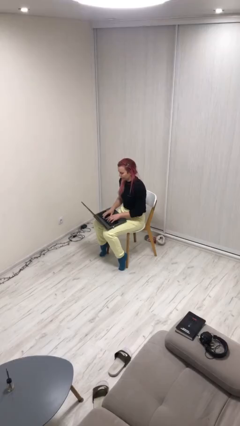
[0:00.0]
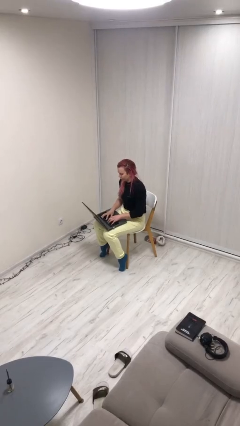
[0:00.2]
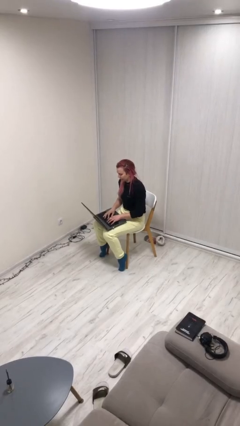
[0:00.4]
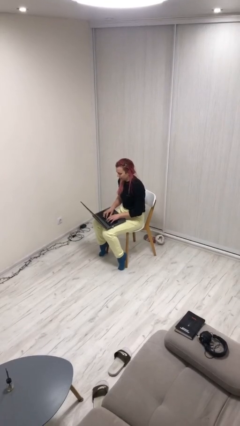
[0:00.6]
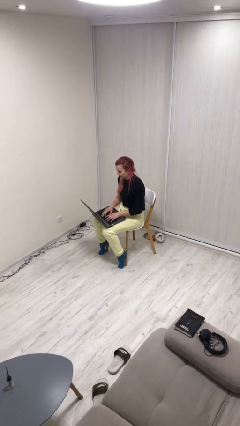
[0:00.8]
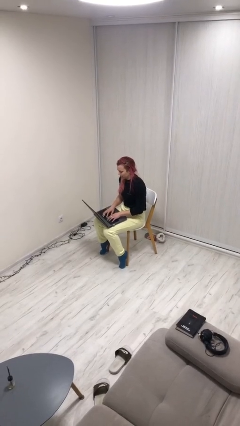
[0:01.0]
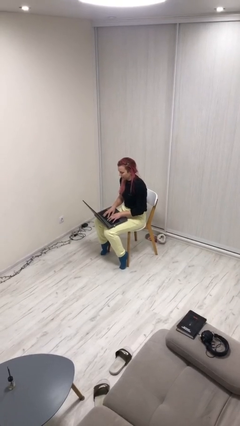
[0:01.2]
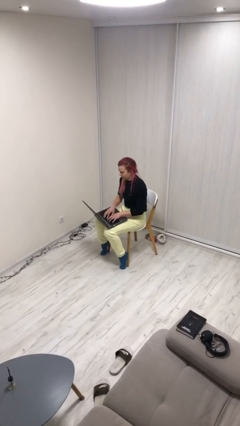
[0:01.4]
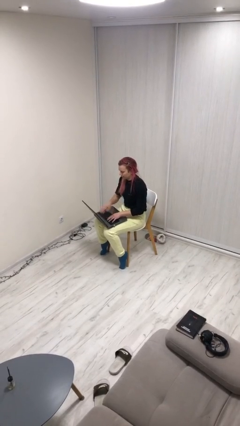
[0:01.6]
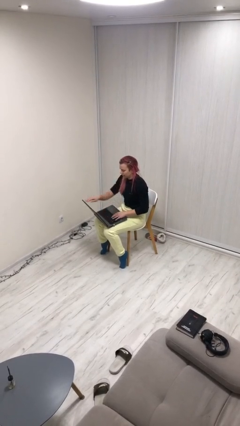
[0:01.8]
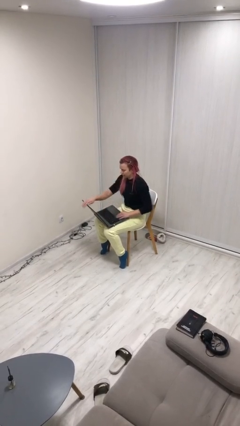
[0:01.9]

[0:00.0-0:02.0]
person interacts with laptop

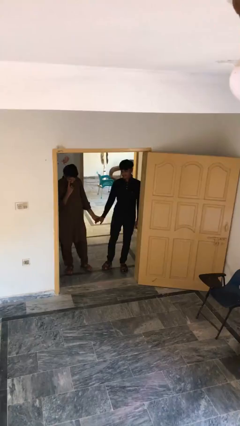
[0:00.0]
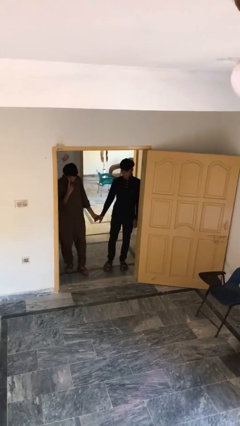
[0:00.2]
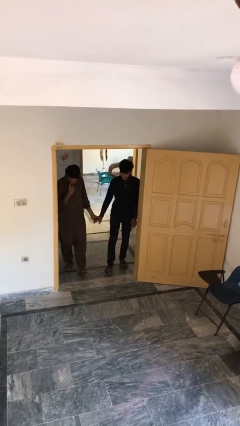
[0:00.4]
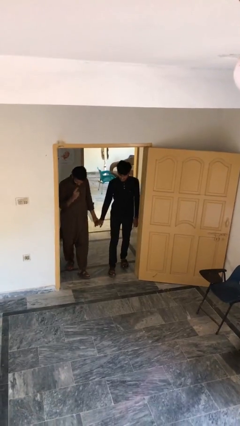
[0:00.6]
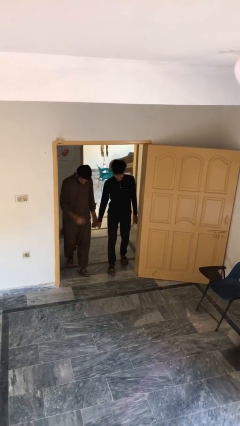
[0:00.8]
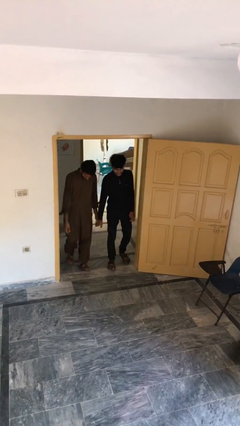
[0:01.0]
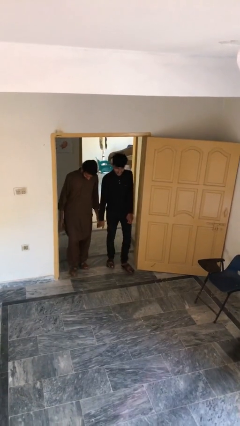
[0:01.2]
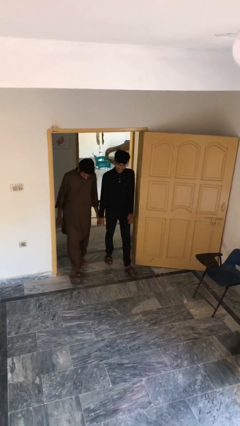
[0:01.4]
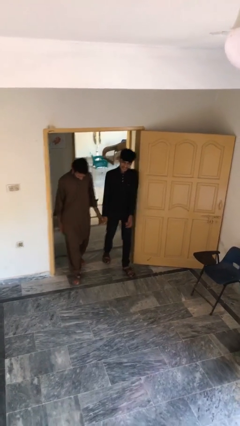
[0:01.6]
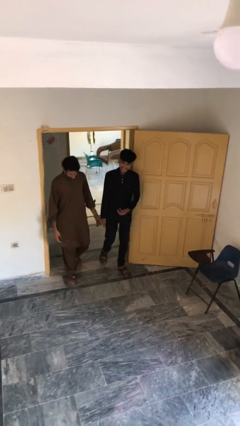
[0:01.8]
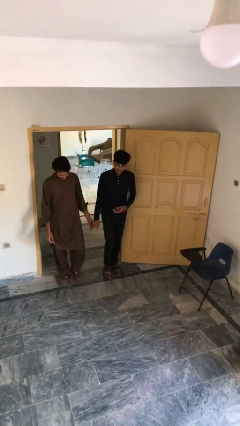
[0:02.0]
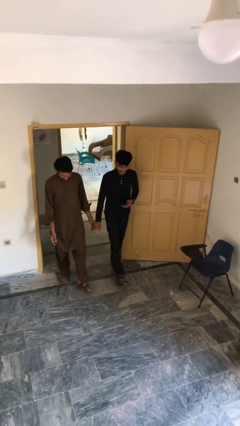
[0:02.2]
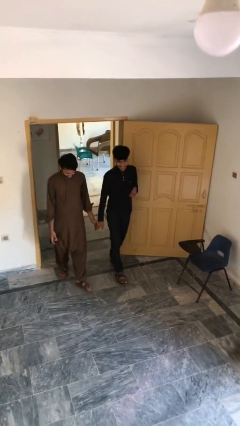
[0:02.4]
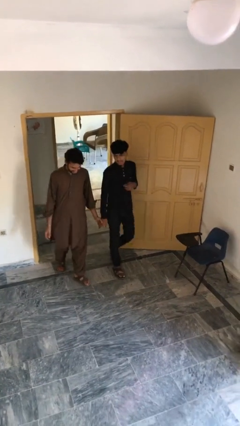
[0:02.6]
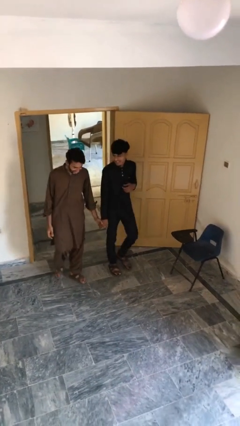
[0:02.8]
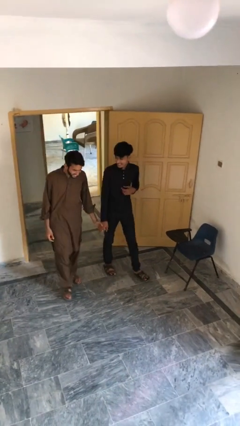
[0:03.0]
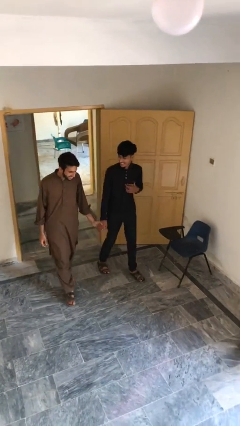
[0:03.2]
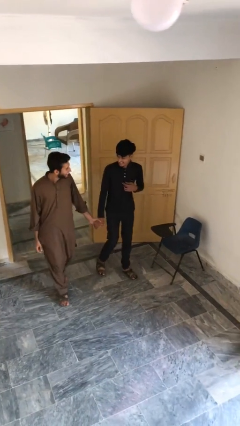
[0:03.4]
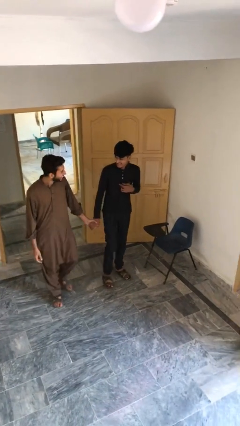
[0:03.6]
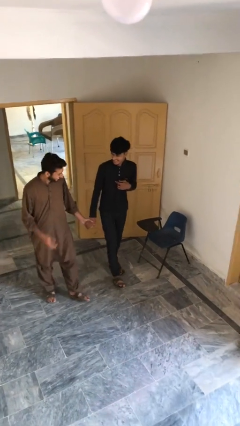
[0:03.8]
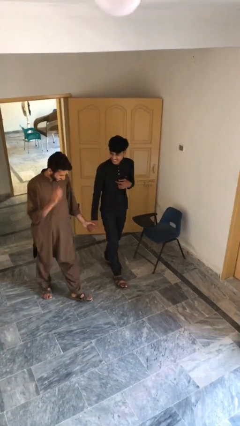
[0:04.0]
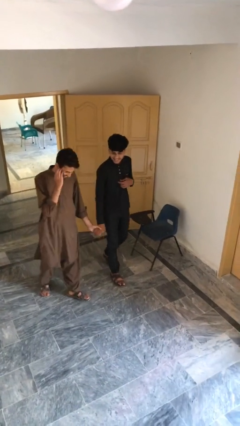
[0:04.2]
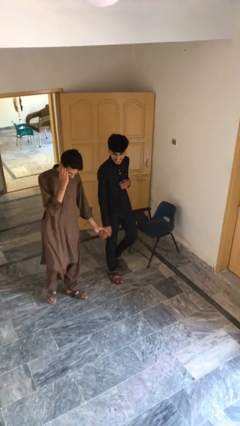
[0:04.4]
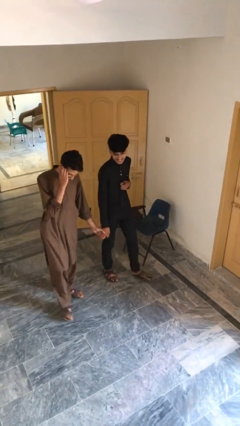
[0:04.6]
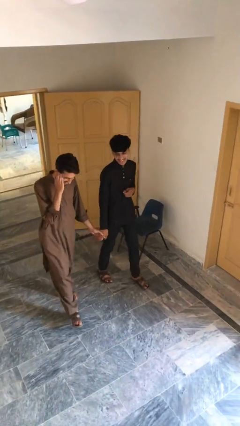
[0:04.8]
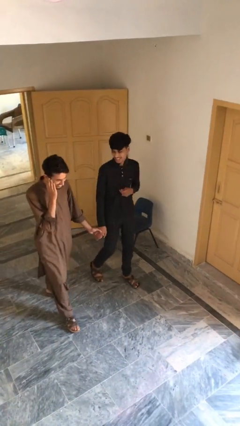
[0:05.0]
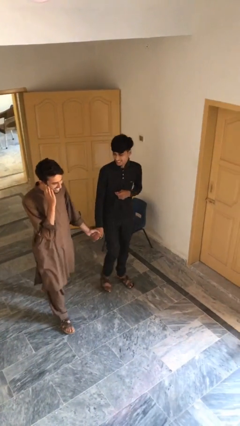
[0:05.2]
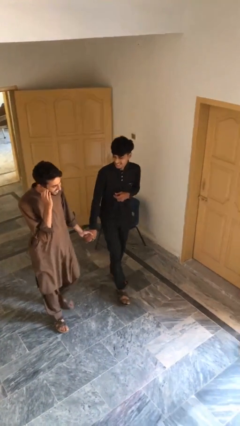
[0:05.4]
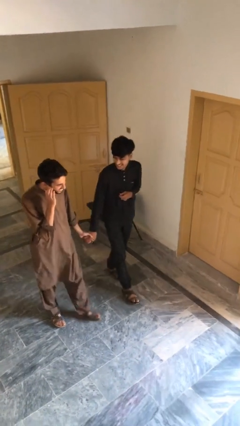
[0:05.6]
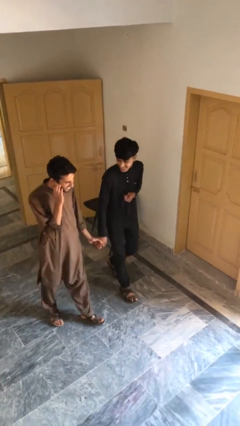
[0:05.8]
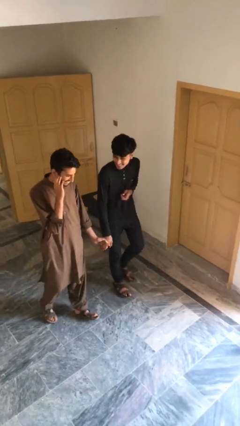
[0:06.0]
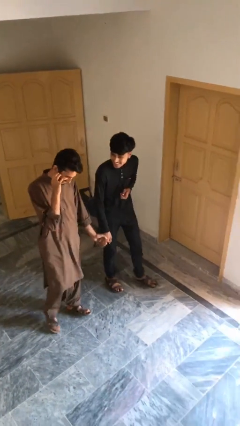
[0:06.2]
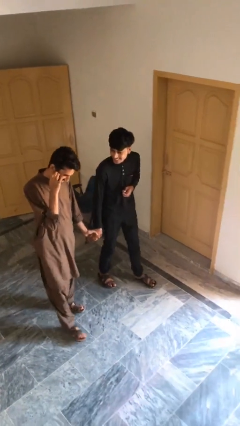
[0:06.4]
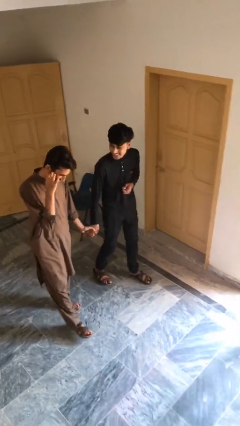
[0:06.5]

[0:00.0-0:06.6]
person holds hand

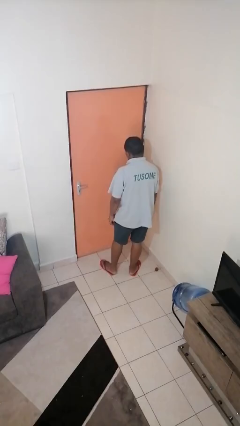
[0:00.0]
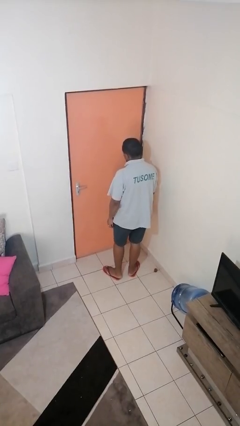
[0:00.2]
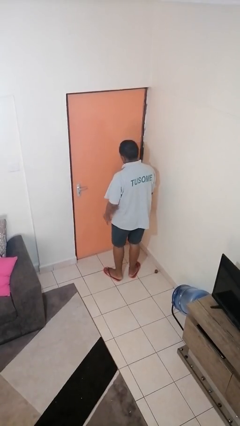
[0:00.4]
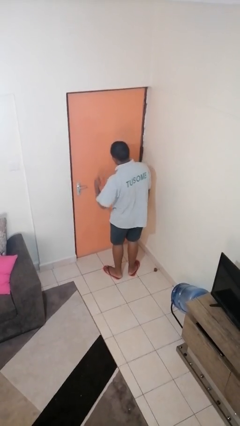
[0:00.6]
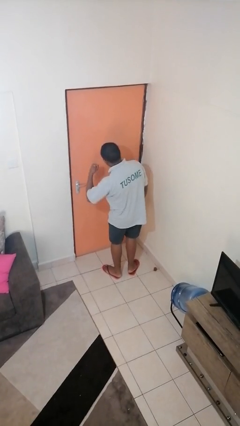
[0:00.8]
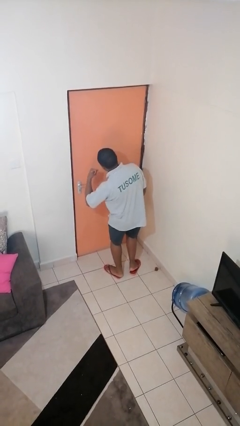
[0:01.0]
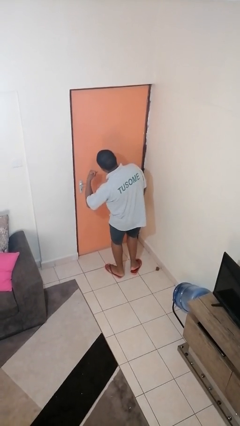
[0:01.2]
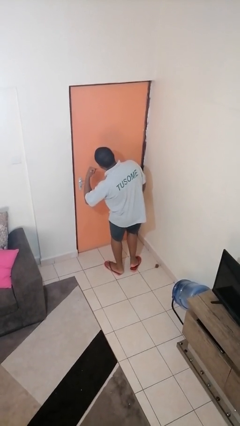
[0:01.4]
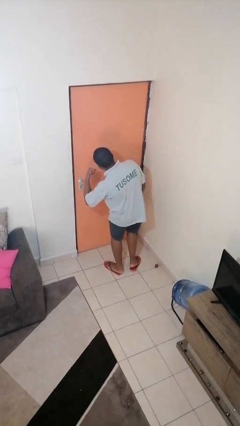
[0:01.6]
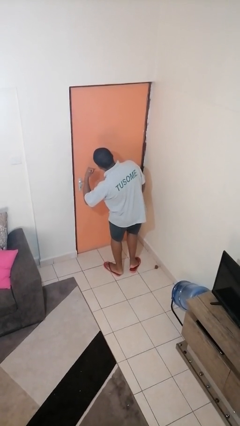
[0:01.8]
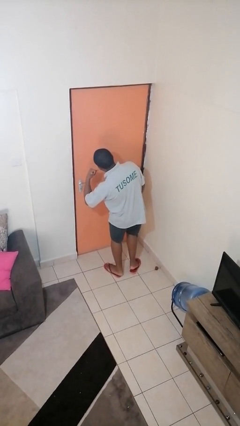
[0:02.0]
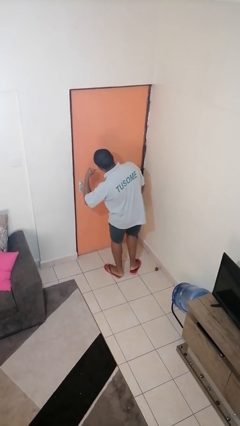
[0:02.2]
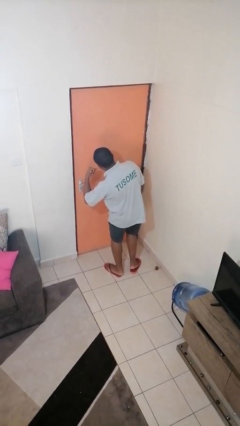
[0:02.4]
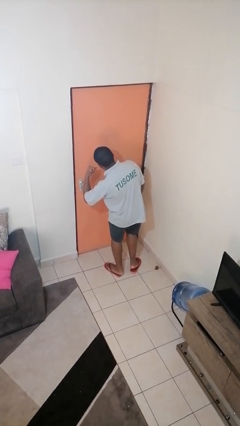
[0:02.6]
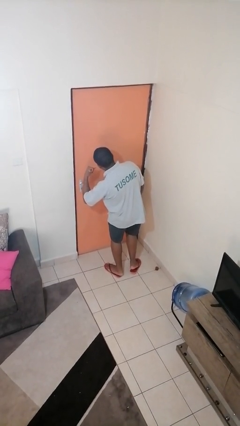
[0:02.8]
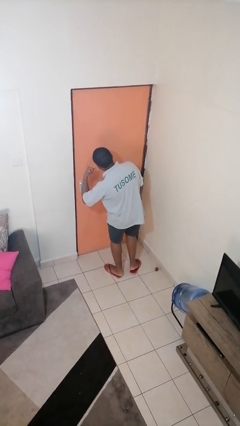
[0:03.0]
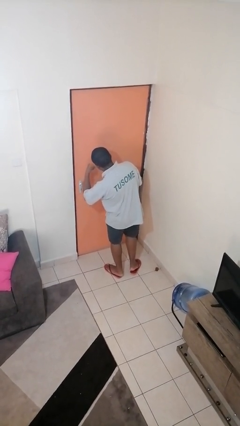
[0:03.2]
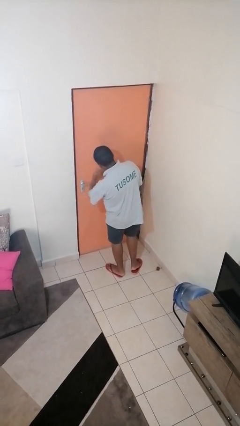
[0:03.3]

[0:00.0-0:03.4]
person gestures call me

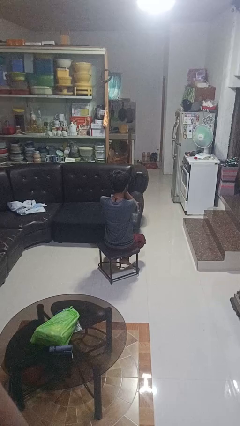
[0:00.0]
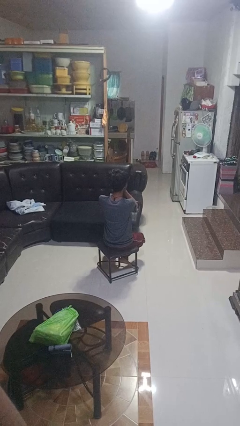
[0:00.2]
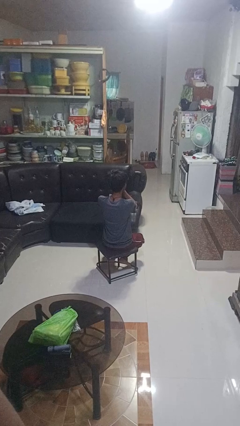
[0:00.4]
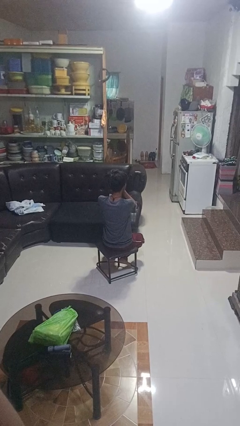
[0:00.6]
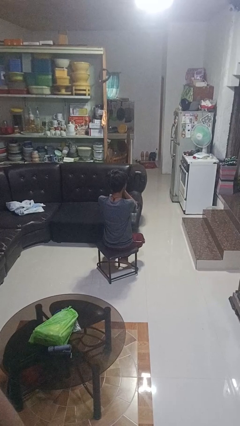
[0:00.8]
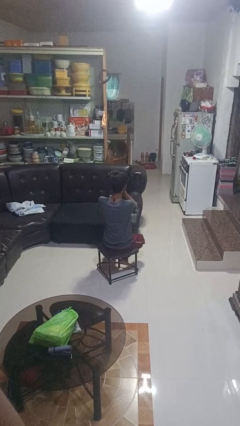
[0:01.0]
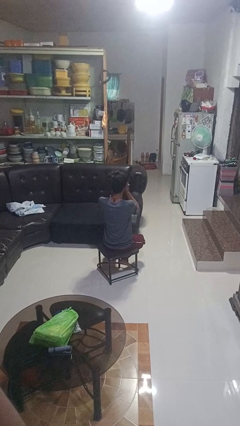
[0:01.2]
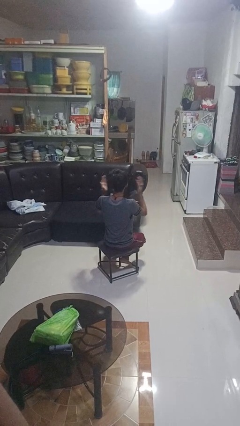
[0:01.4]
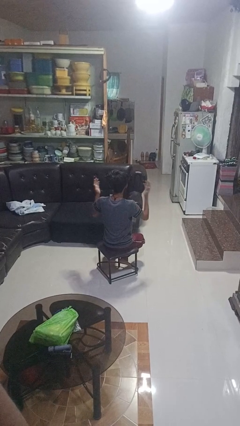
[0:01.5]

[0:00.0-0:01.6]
person covers face with hands

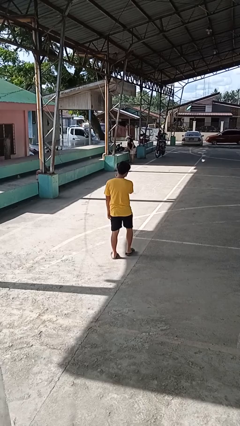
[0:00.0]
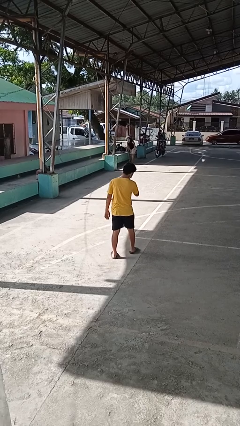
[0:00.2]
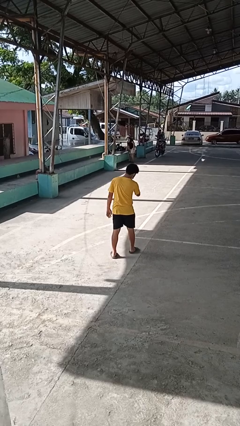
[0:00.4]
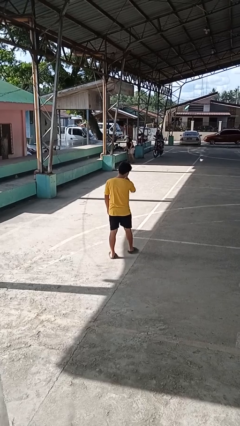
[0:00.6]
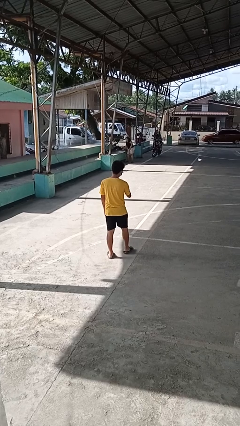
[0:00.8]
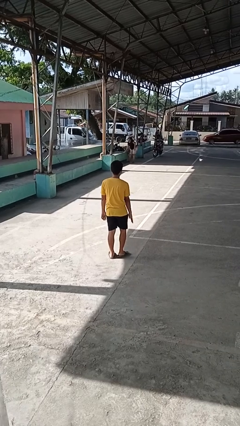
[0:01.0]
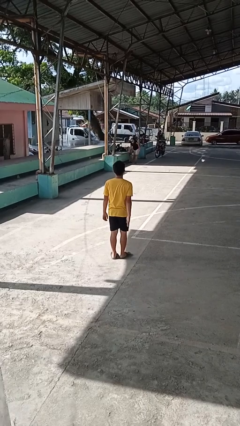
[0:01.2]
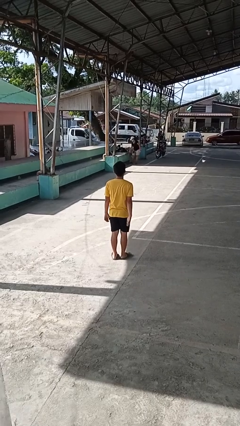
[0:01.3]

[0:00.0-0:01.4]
person karate chop

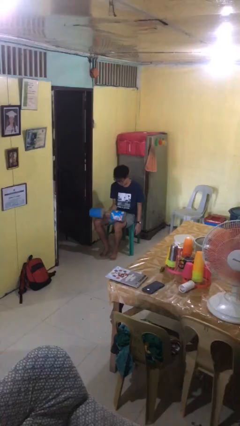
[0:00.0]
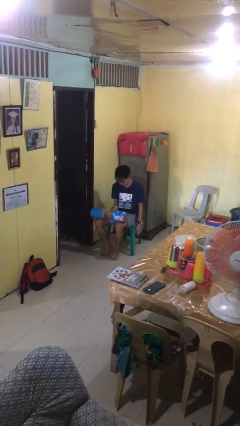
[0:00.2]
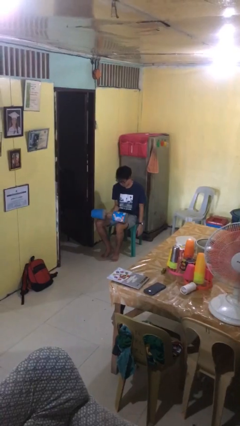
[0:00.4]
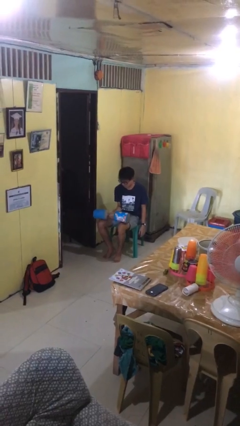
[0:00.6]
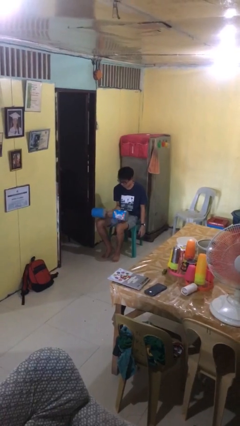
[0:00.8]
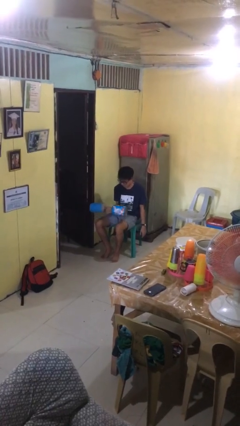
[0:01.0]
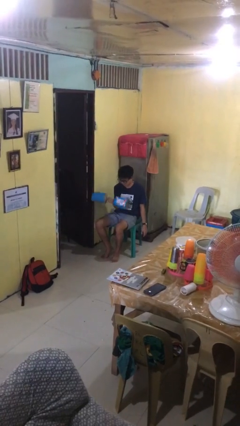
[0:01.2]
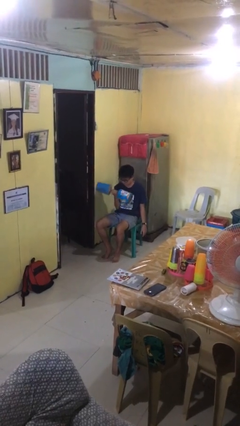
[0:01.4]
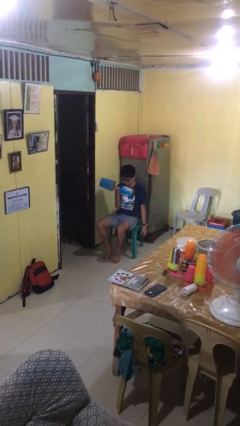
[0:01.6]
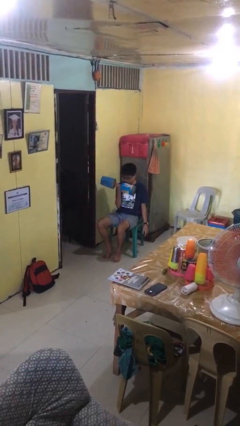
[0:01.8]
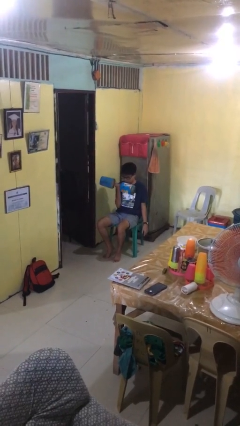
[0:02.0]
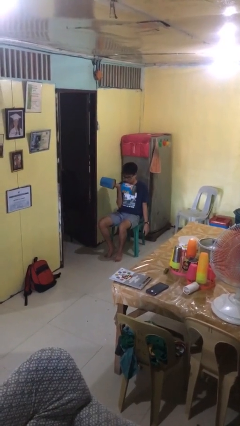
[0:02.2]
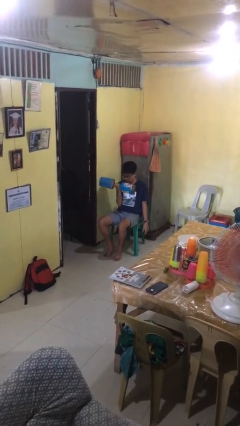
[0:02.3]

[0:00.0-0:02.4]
person lifts dumbbells
